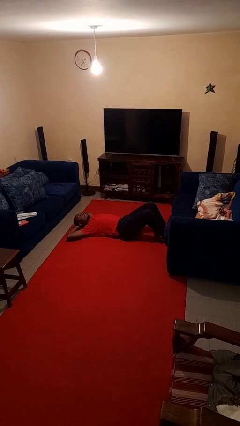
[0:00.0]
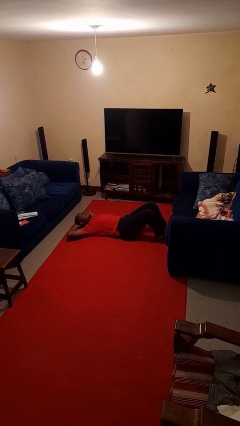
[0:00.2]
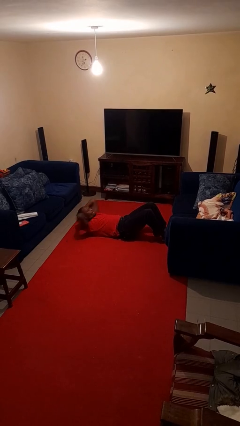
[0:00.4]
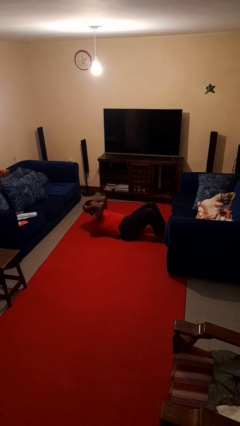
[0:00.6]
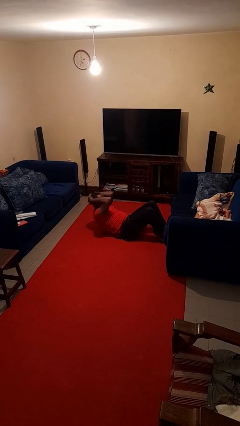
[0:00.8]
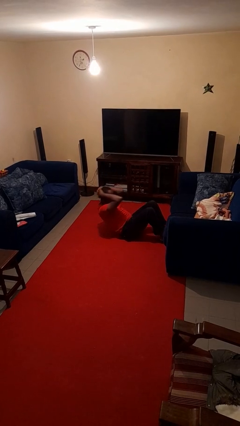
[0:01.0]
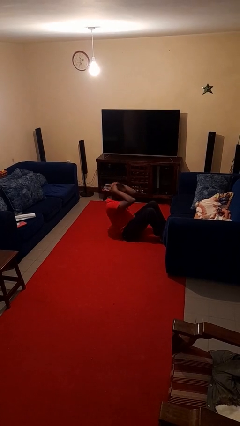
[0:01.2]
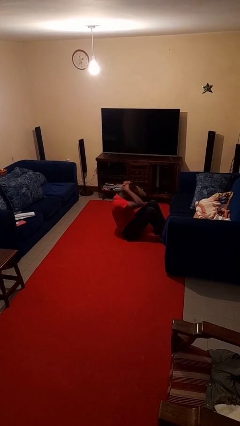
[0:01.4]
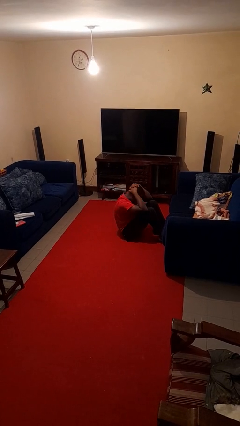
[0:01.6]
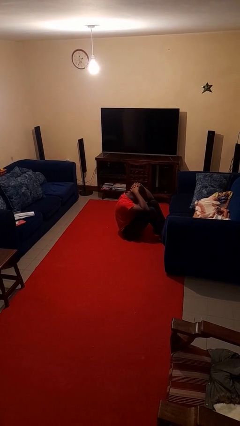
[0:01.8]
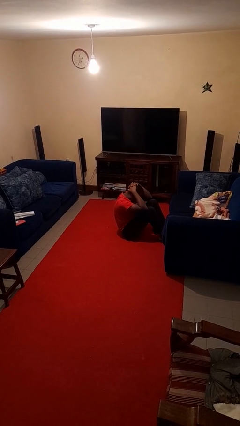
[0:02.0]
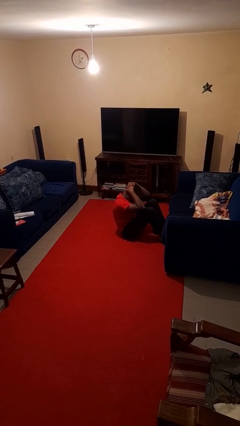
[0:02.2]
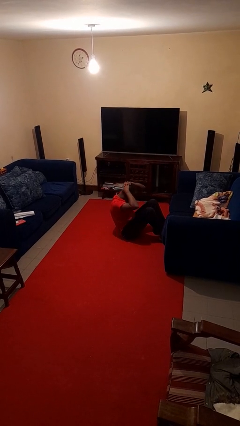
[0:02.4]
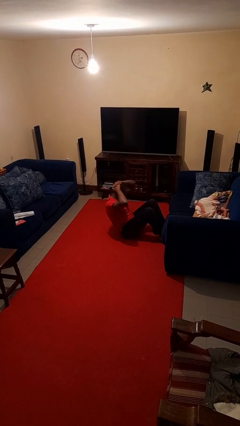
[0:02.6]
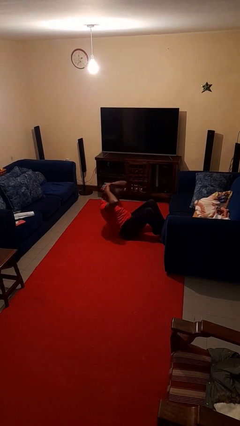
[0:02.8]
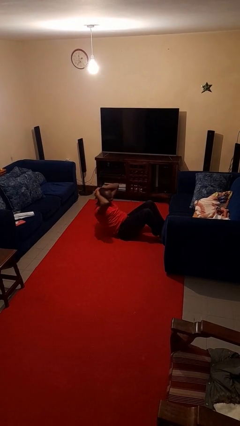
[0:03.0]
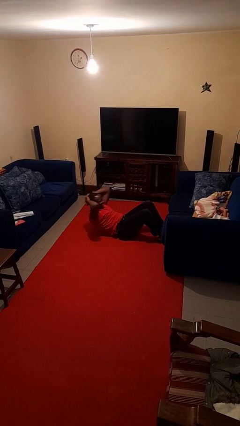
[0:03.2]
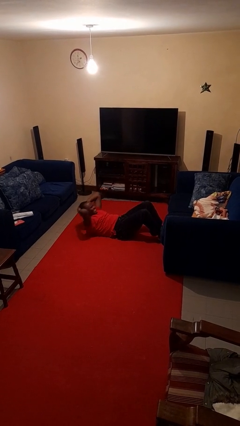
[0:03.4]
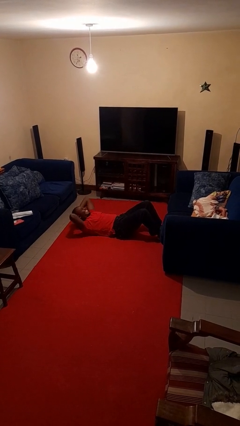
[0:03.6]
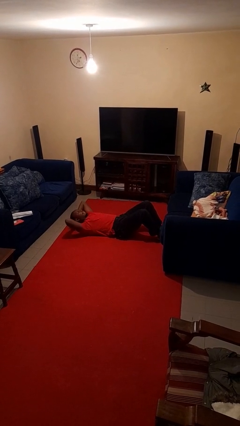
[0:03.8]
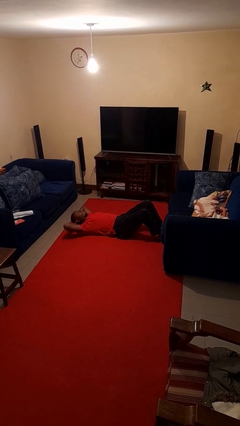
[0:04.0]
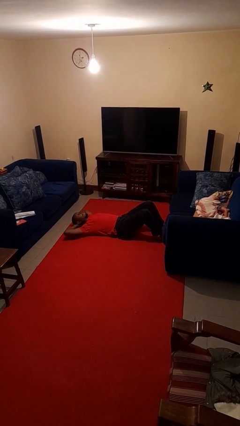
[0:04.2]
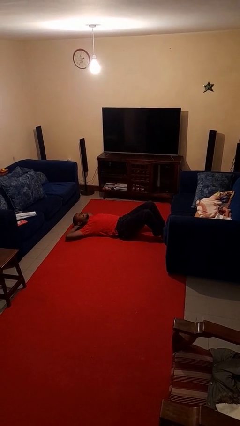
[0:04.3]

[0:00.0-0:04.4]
person exercises with situp

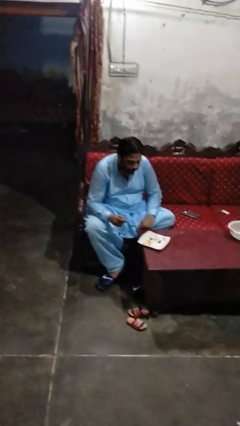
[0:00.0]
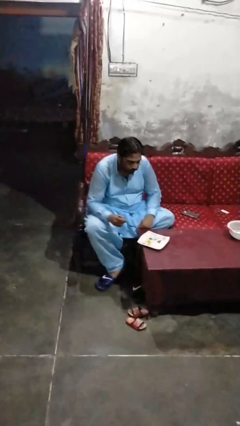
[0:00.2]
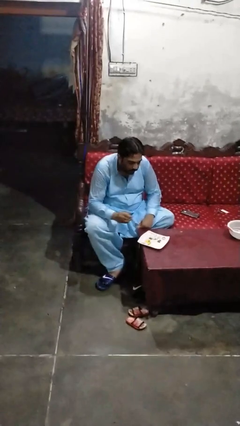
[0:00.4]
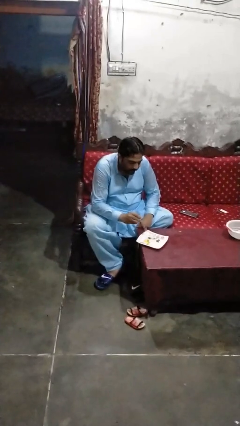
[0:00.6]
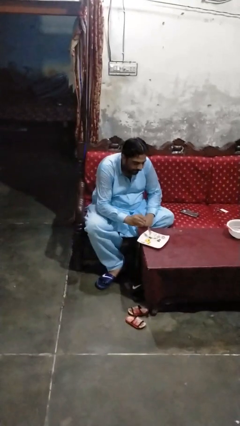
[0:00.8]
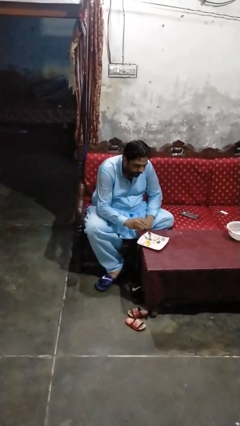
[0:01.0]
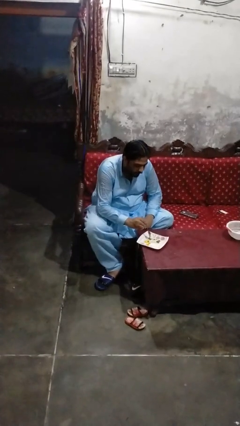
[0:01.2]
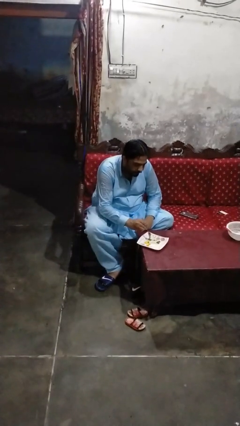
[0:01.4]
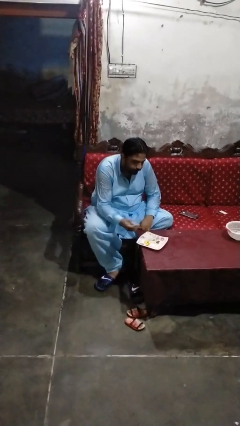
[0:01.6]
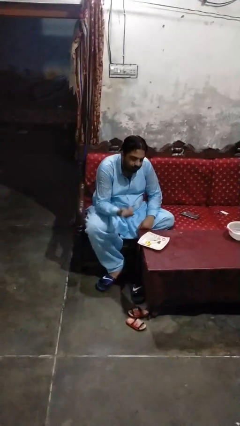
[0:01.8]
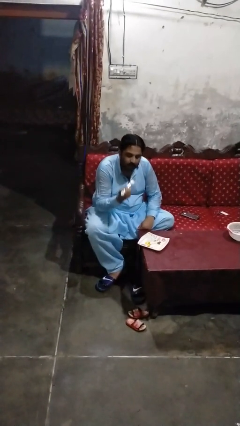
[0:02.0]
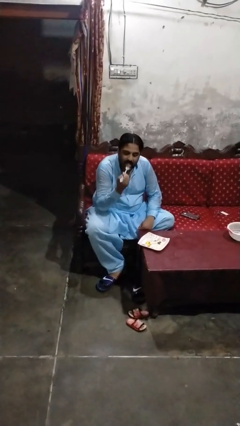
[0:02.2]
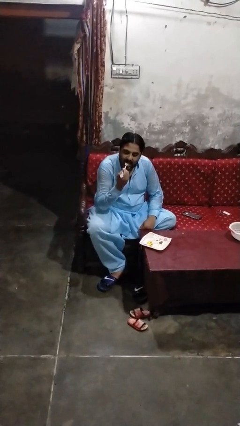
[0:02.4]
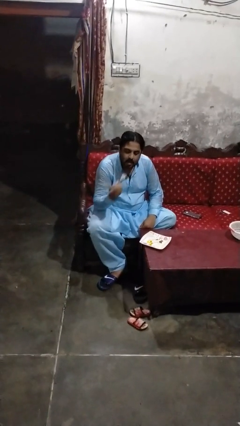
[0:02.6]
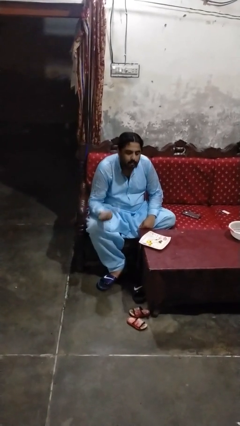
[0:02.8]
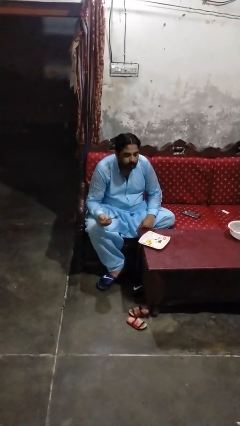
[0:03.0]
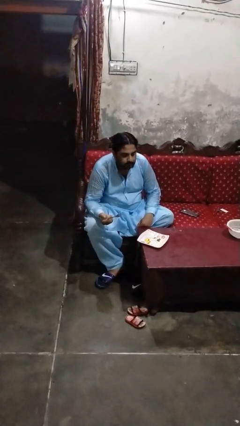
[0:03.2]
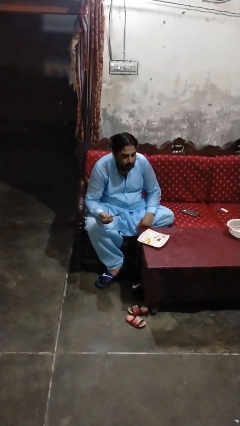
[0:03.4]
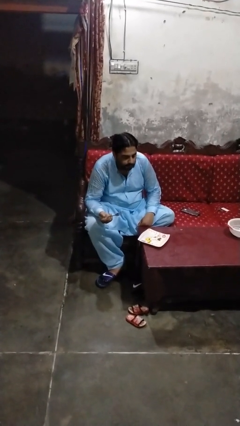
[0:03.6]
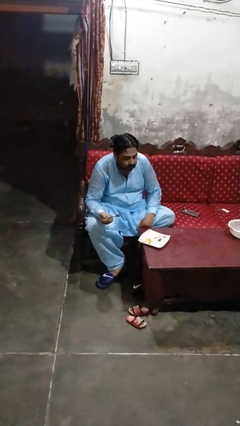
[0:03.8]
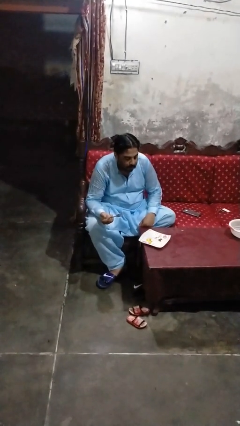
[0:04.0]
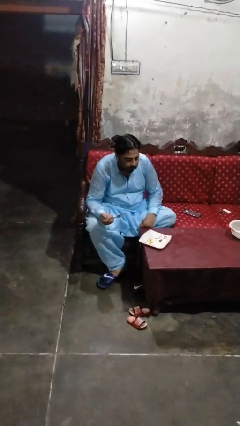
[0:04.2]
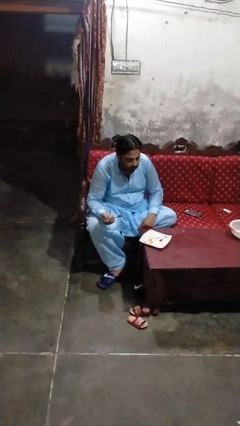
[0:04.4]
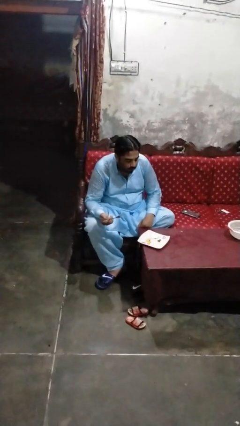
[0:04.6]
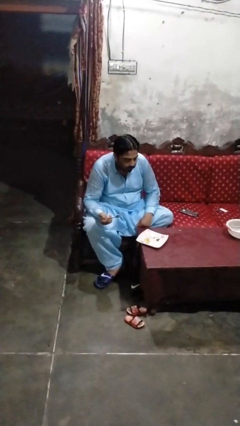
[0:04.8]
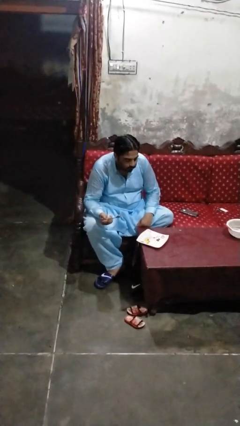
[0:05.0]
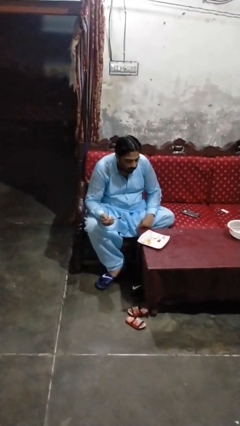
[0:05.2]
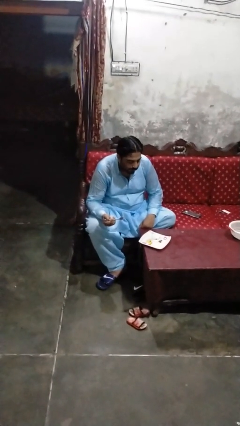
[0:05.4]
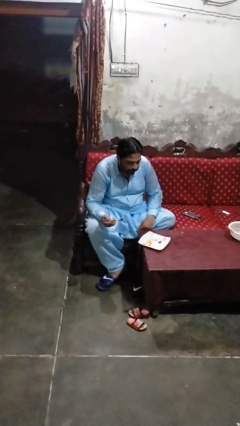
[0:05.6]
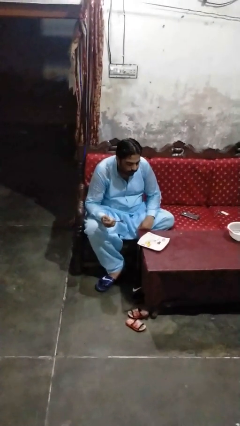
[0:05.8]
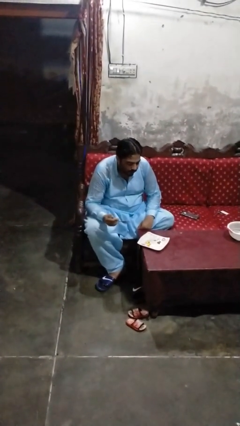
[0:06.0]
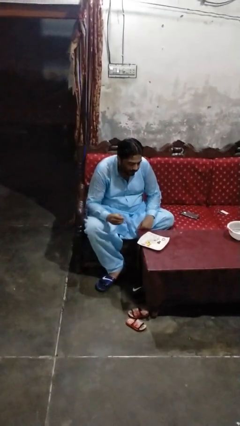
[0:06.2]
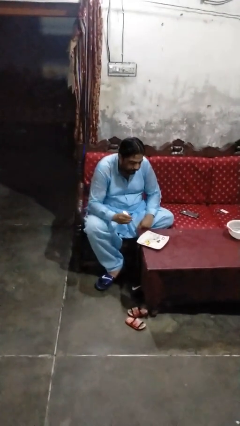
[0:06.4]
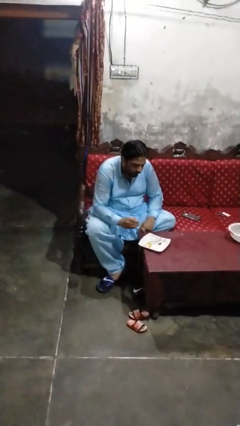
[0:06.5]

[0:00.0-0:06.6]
person eats with utensil

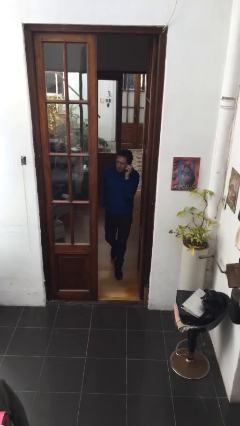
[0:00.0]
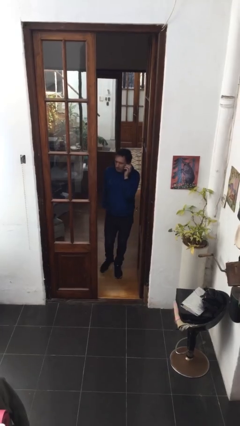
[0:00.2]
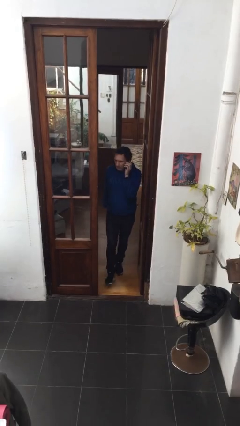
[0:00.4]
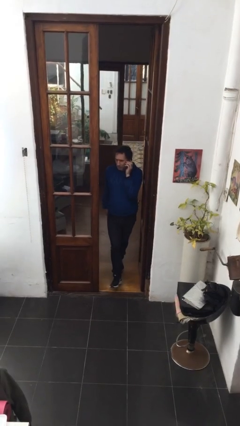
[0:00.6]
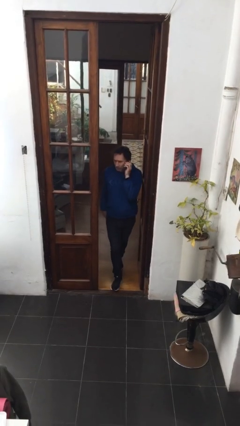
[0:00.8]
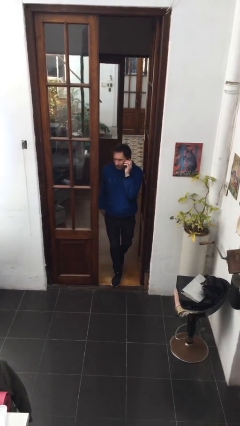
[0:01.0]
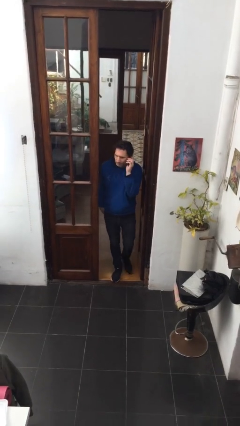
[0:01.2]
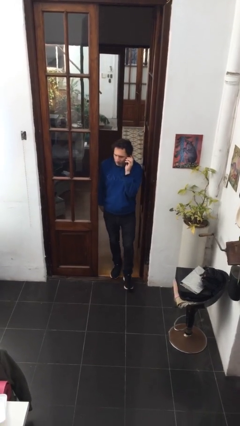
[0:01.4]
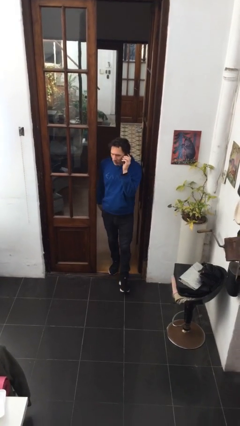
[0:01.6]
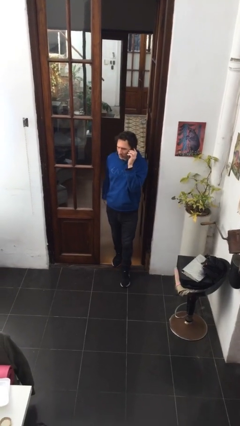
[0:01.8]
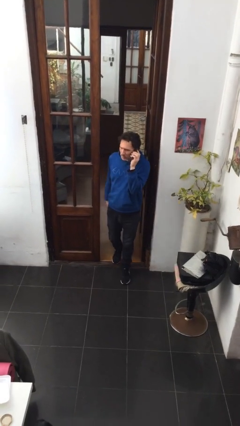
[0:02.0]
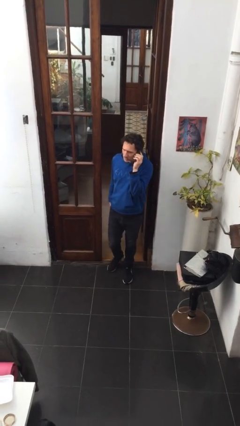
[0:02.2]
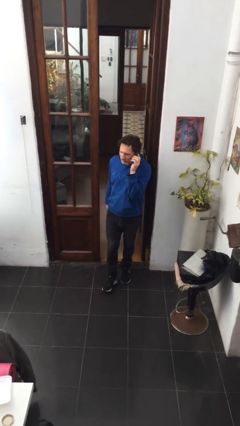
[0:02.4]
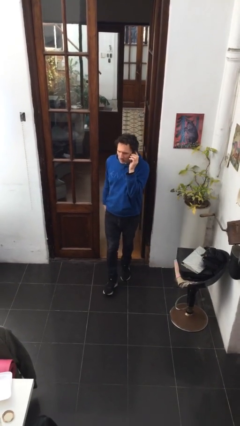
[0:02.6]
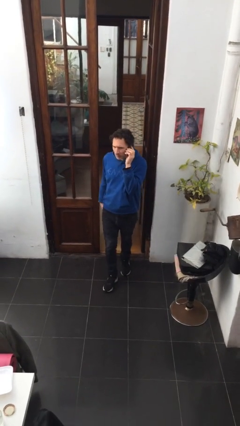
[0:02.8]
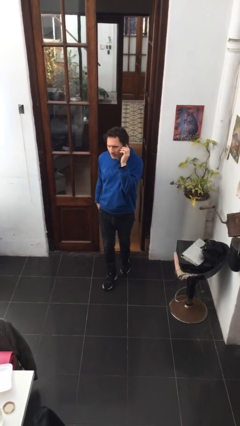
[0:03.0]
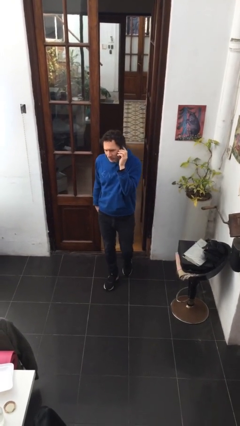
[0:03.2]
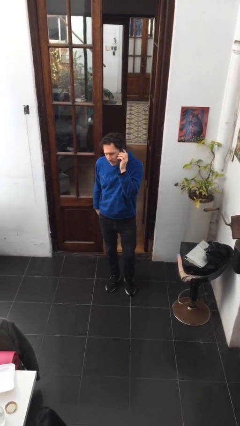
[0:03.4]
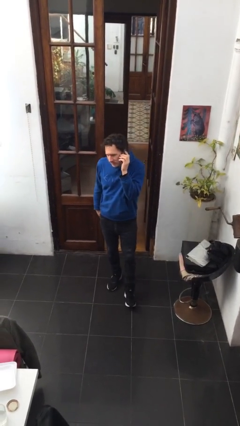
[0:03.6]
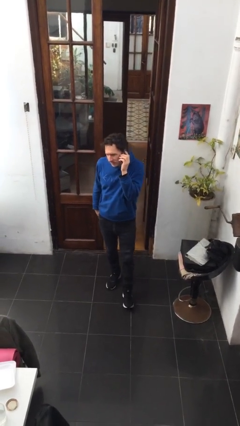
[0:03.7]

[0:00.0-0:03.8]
person enters scene through structure

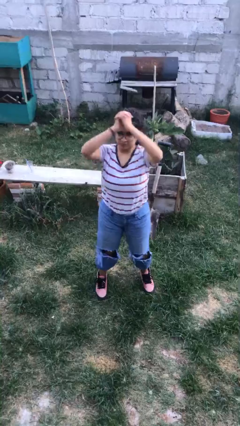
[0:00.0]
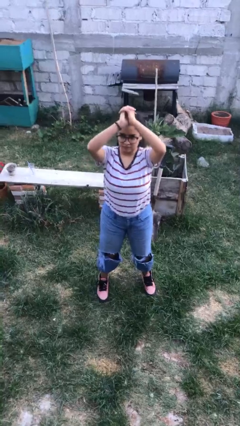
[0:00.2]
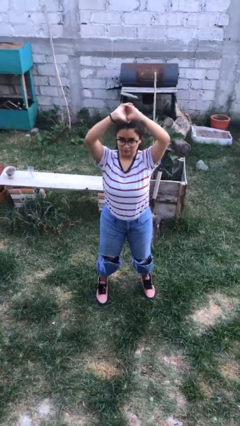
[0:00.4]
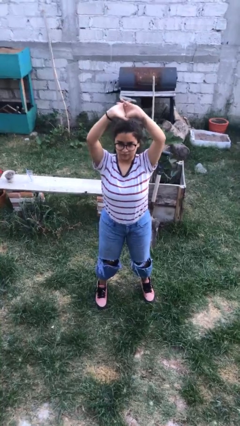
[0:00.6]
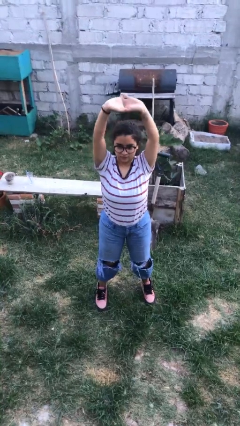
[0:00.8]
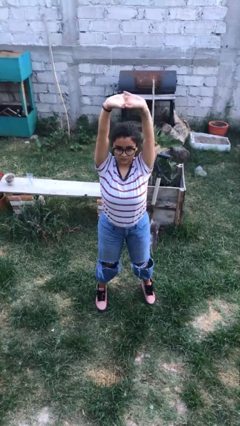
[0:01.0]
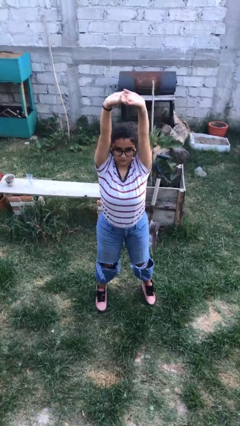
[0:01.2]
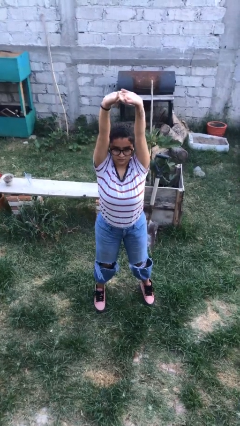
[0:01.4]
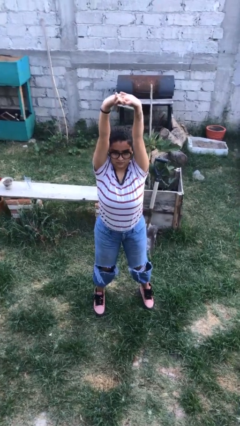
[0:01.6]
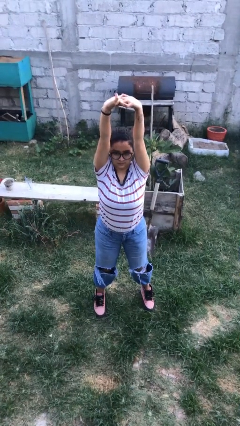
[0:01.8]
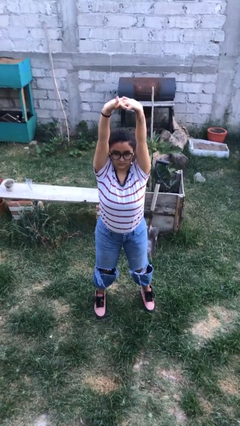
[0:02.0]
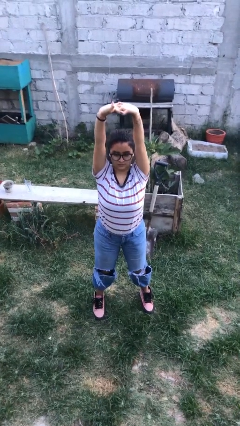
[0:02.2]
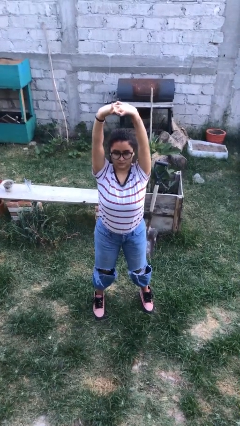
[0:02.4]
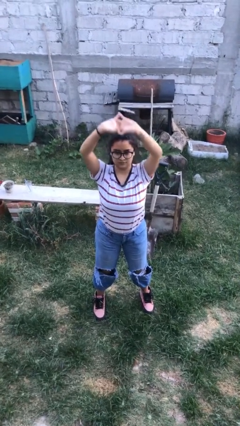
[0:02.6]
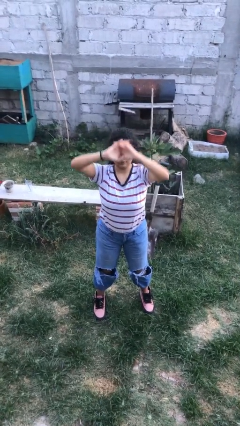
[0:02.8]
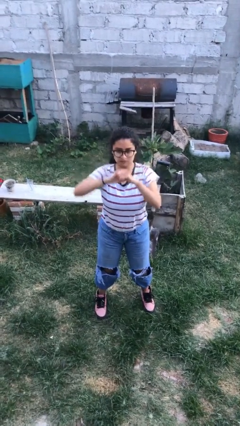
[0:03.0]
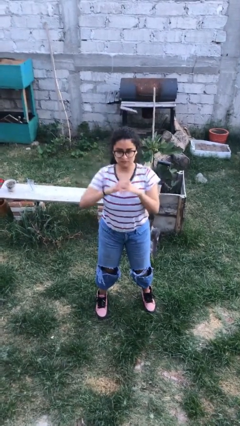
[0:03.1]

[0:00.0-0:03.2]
person stretches arms over head
